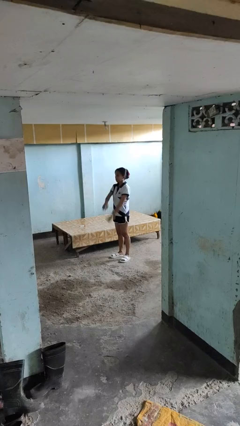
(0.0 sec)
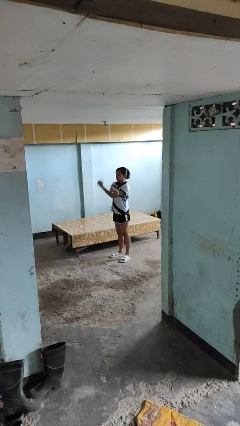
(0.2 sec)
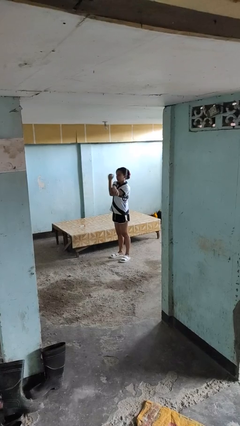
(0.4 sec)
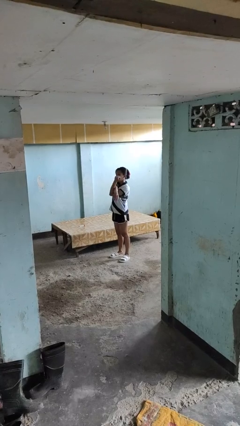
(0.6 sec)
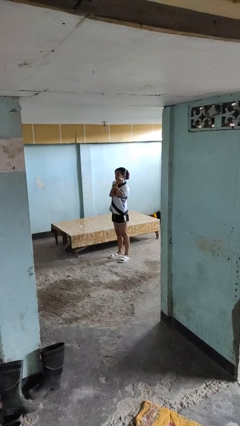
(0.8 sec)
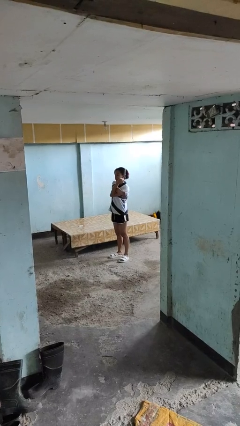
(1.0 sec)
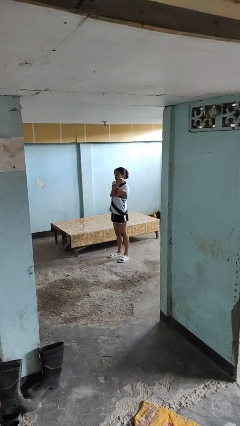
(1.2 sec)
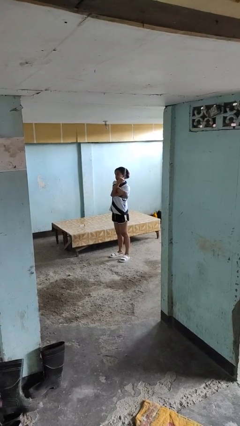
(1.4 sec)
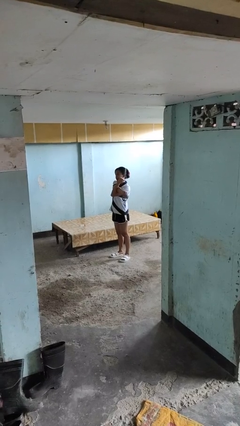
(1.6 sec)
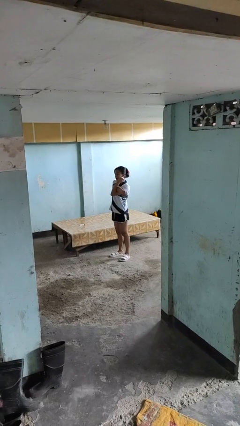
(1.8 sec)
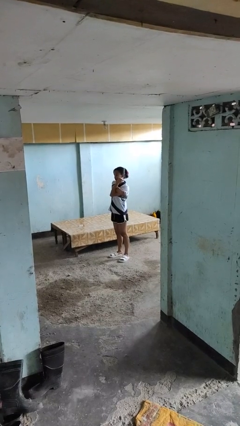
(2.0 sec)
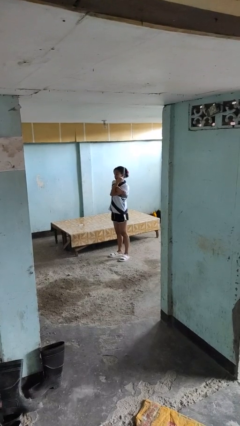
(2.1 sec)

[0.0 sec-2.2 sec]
person crosses arms

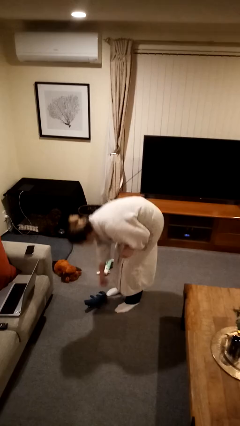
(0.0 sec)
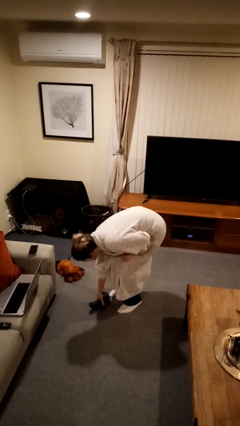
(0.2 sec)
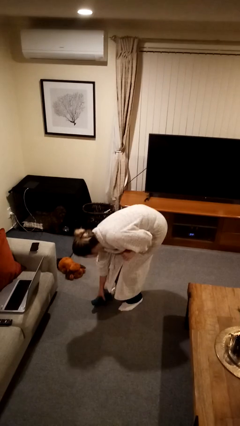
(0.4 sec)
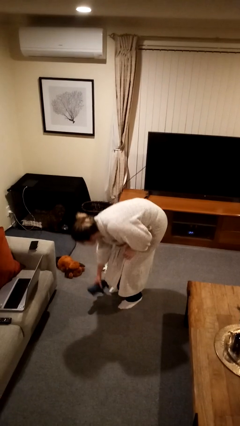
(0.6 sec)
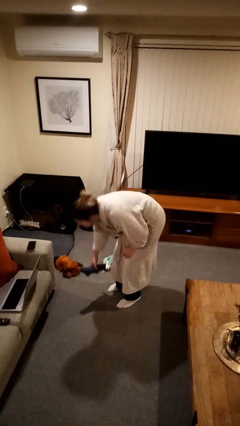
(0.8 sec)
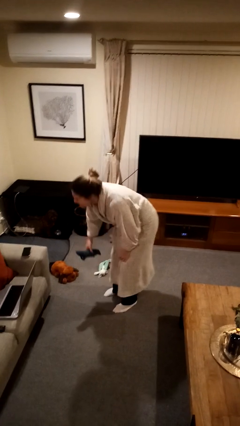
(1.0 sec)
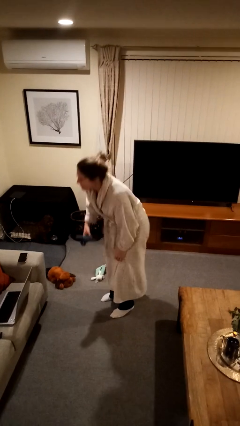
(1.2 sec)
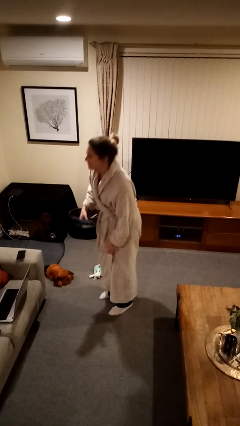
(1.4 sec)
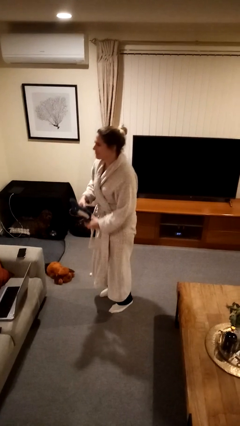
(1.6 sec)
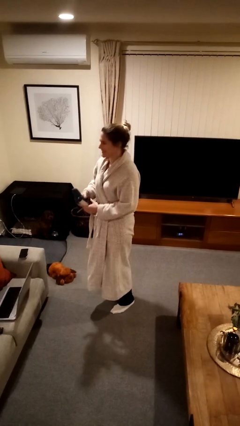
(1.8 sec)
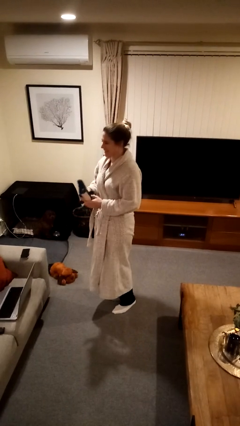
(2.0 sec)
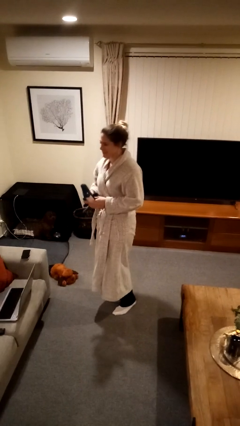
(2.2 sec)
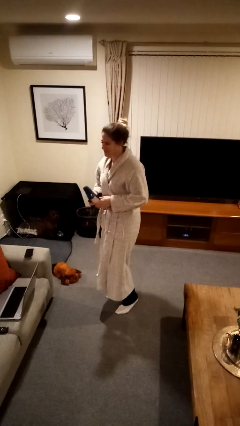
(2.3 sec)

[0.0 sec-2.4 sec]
person picks up object from floor

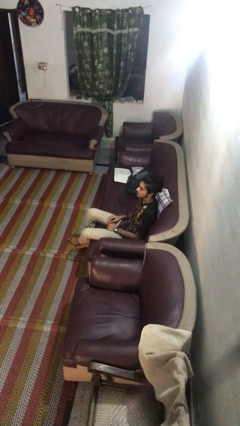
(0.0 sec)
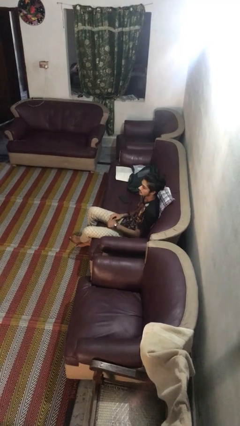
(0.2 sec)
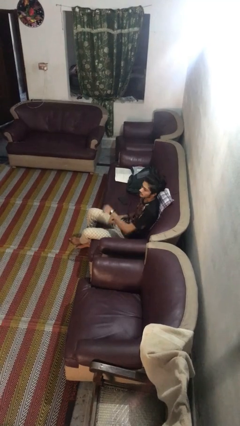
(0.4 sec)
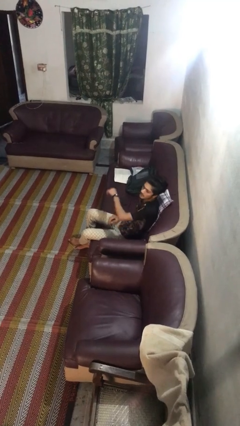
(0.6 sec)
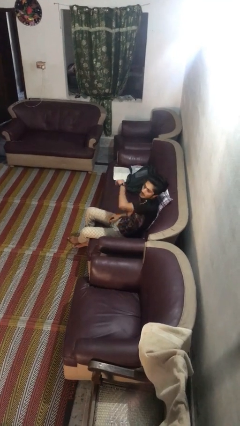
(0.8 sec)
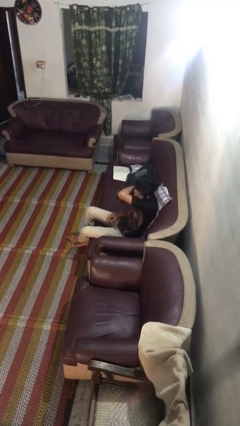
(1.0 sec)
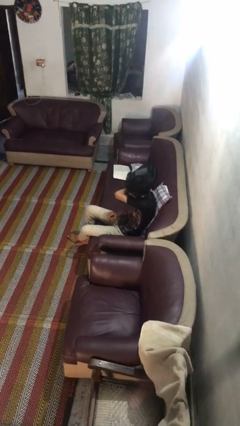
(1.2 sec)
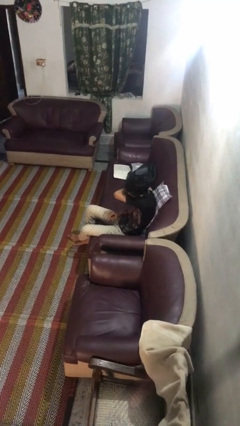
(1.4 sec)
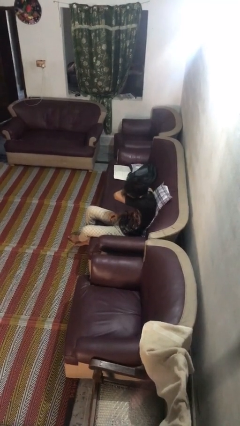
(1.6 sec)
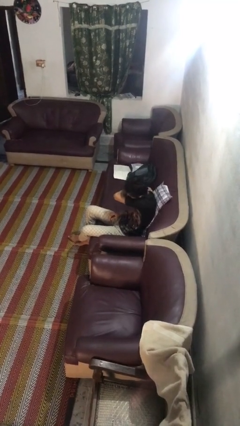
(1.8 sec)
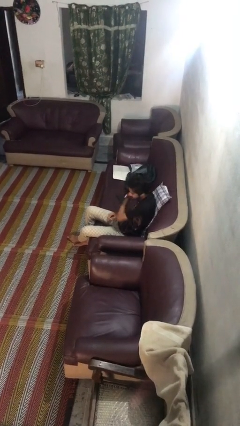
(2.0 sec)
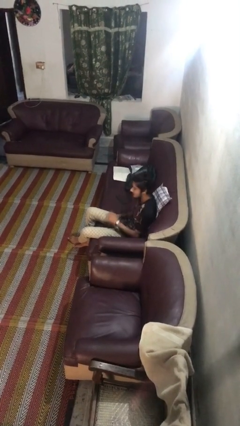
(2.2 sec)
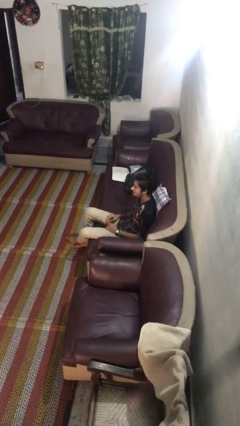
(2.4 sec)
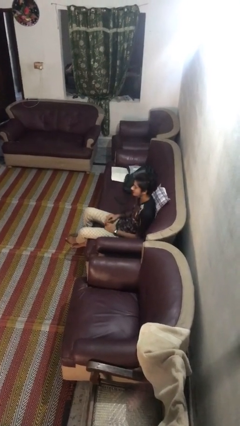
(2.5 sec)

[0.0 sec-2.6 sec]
person sneezes into arm

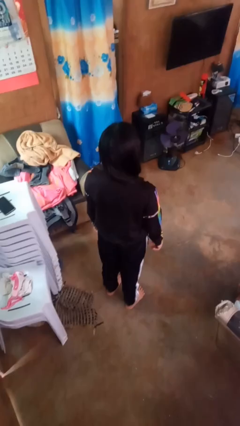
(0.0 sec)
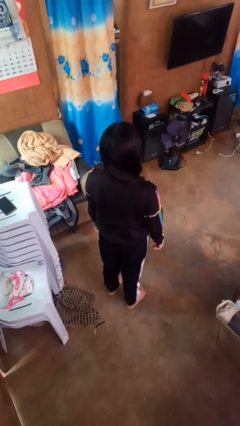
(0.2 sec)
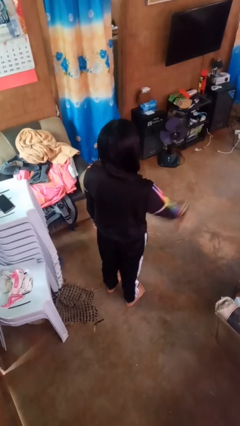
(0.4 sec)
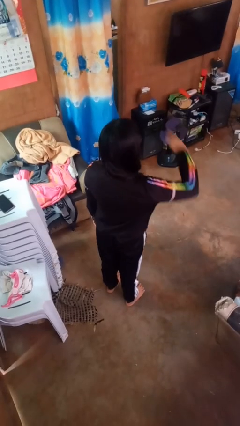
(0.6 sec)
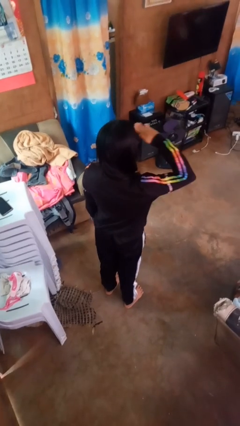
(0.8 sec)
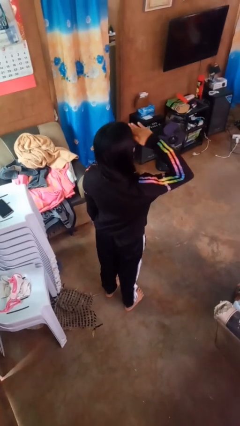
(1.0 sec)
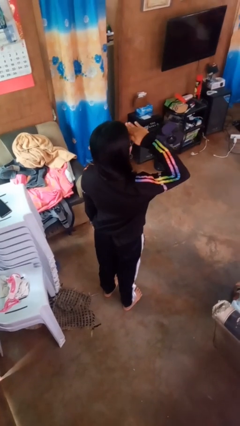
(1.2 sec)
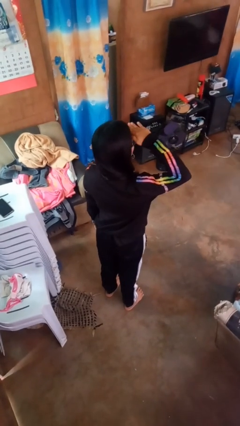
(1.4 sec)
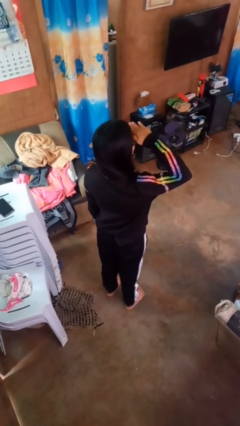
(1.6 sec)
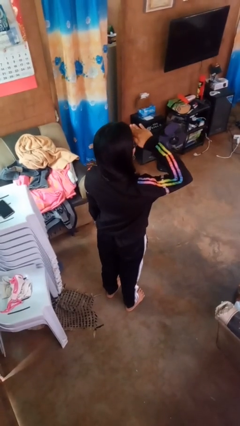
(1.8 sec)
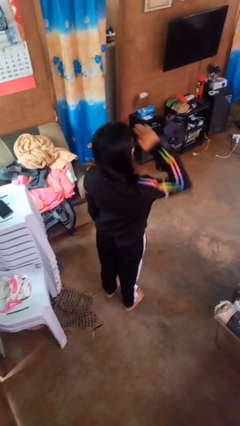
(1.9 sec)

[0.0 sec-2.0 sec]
person salutes

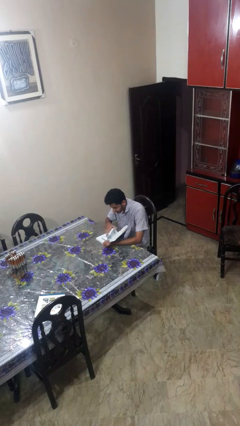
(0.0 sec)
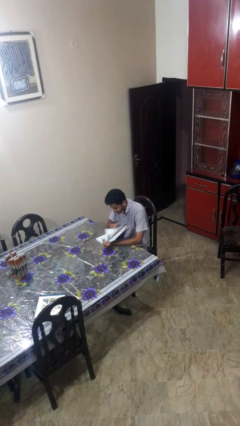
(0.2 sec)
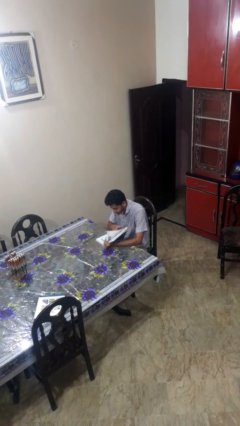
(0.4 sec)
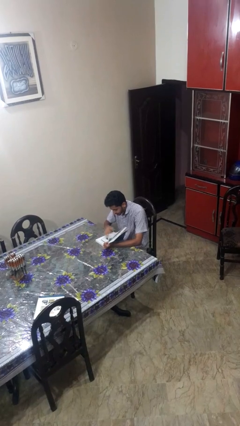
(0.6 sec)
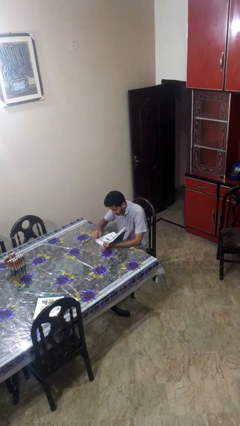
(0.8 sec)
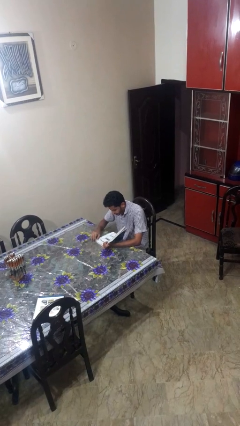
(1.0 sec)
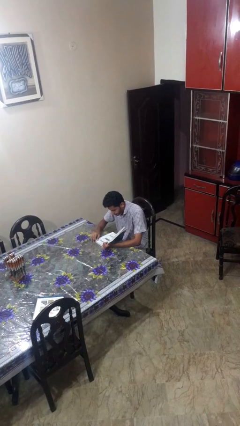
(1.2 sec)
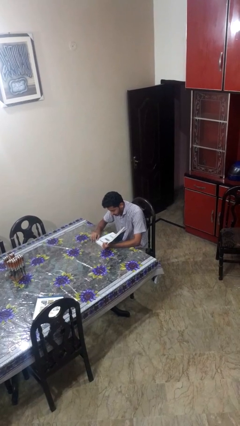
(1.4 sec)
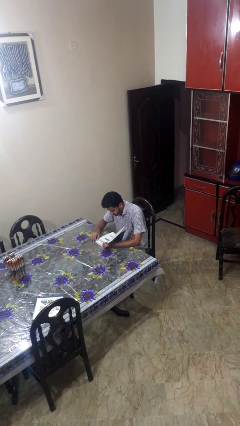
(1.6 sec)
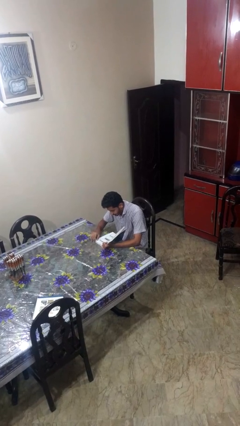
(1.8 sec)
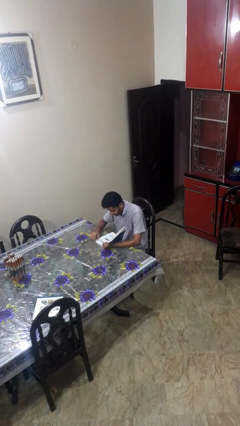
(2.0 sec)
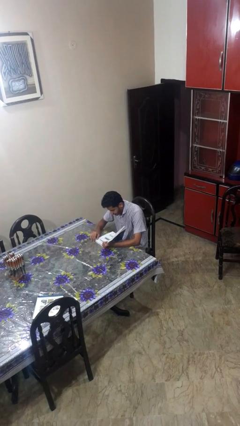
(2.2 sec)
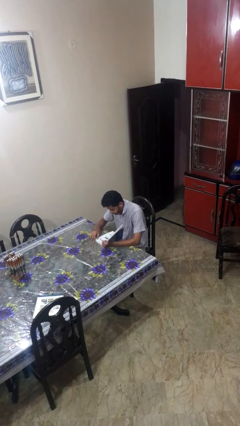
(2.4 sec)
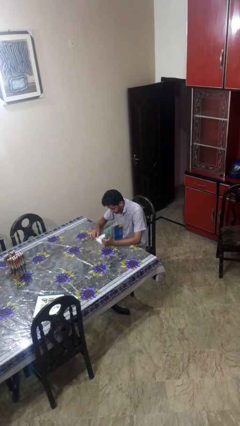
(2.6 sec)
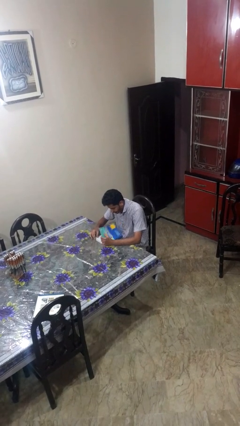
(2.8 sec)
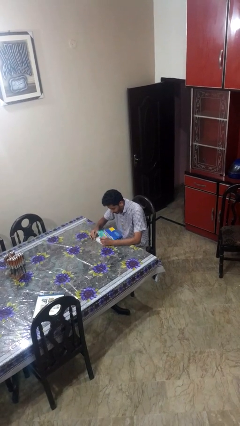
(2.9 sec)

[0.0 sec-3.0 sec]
person reads book

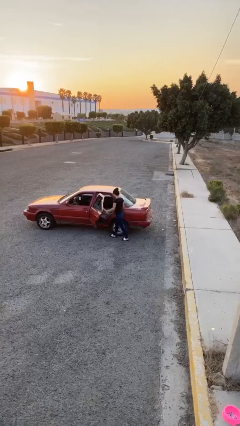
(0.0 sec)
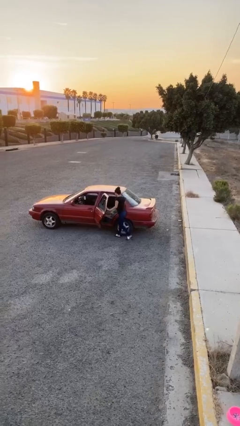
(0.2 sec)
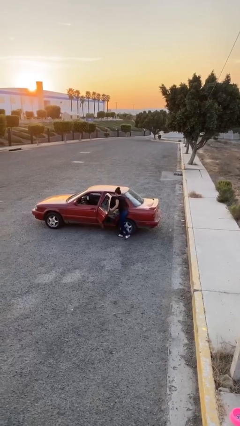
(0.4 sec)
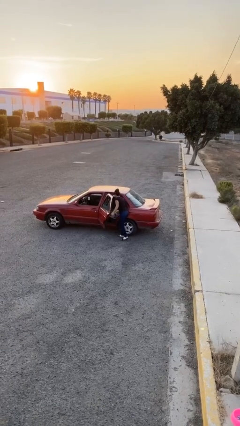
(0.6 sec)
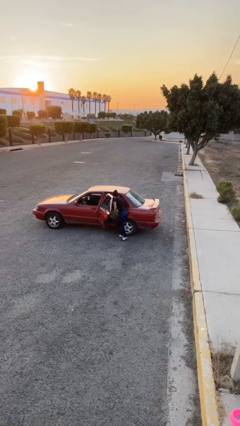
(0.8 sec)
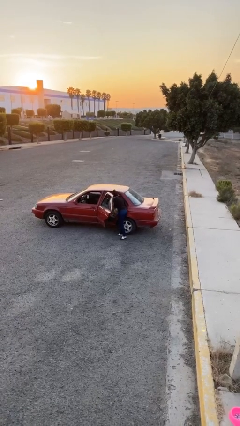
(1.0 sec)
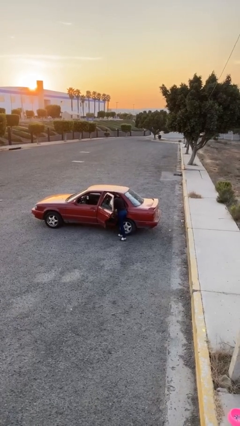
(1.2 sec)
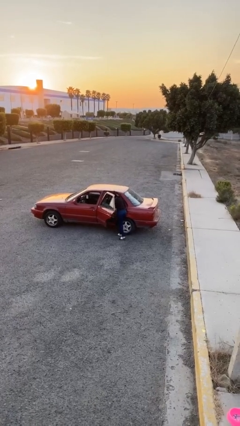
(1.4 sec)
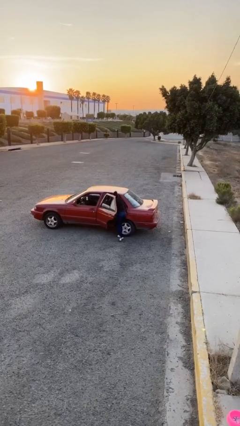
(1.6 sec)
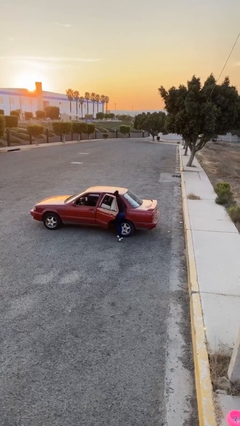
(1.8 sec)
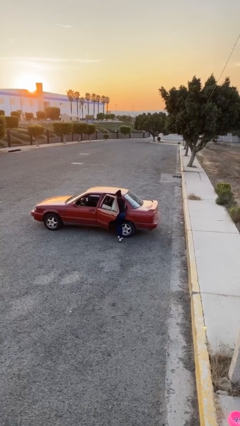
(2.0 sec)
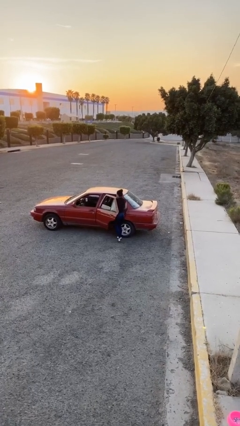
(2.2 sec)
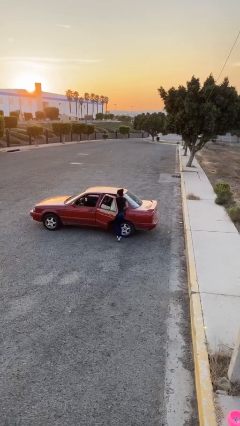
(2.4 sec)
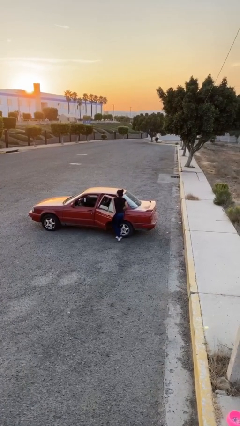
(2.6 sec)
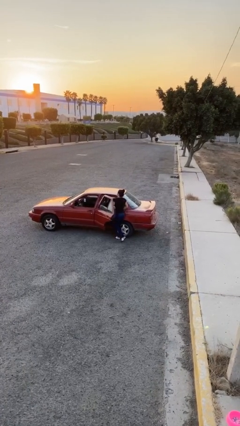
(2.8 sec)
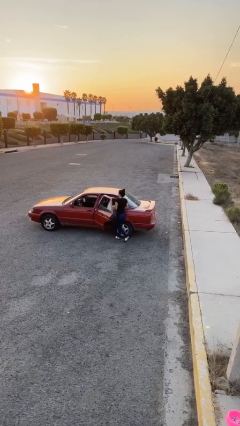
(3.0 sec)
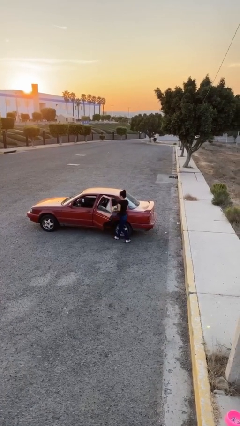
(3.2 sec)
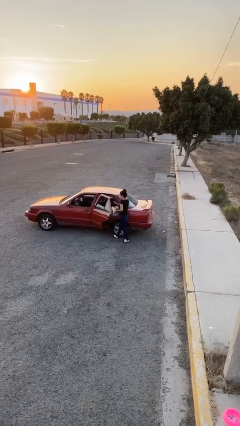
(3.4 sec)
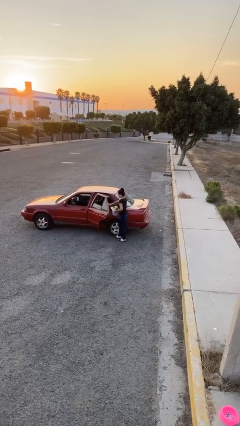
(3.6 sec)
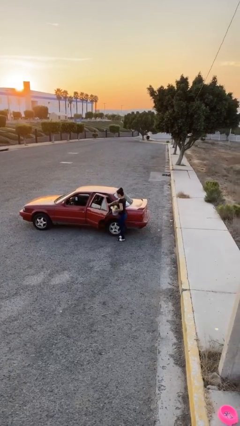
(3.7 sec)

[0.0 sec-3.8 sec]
person unloads car

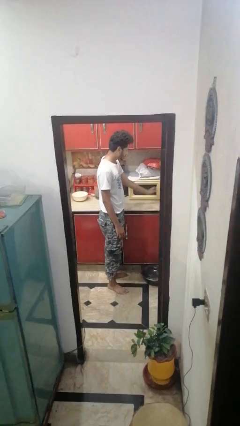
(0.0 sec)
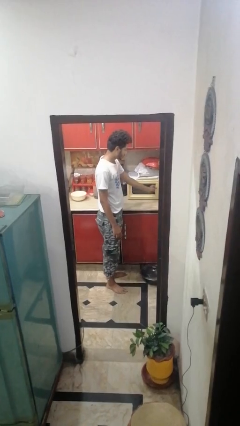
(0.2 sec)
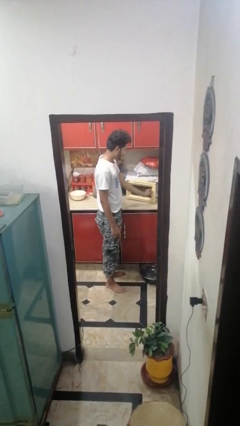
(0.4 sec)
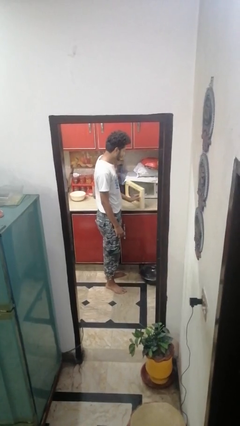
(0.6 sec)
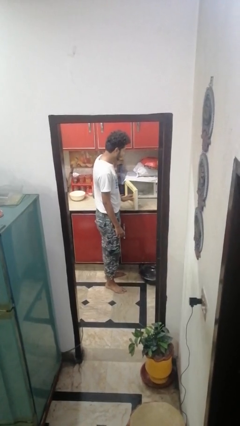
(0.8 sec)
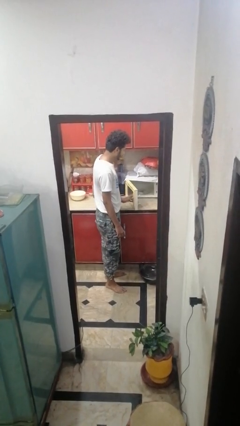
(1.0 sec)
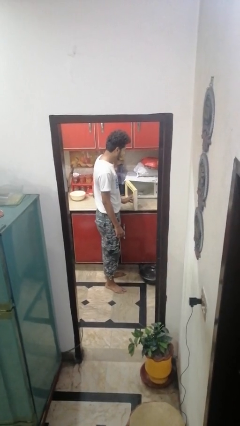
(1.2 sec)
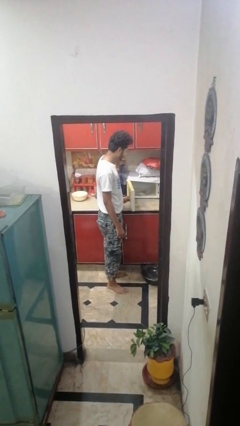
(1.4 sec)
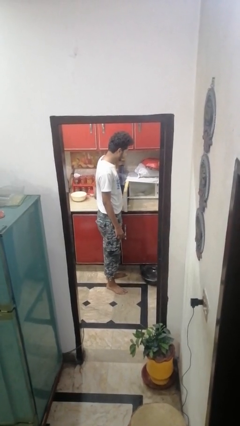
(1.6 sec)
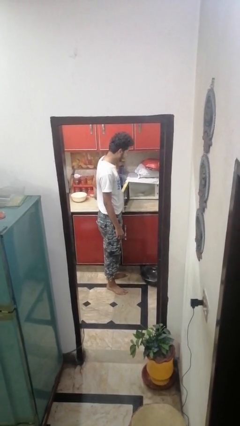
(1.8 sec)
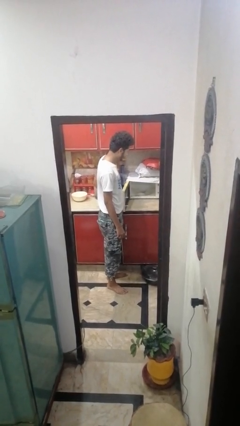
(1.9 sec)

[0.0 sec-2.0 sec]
person opens microwave
